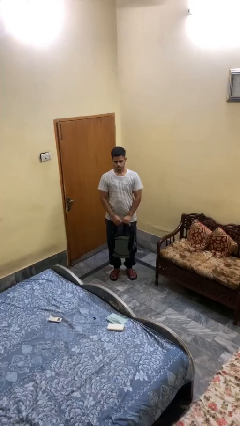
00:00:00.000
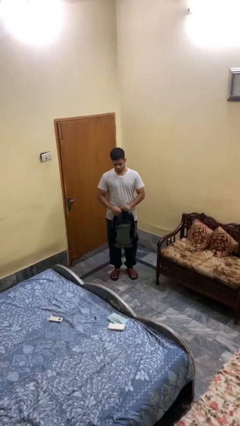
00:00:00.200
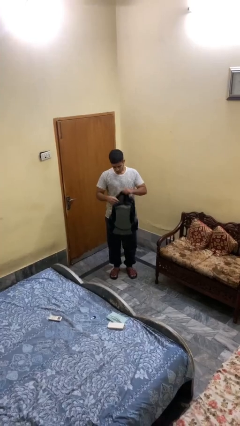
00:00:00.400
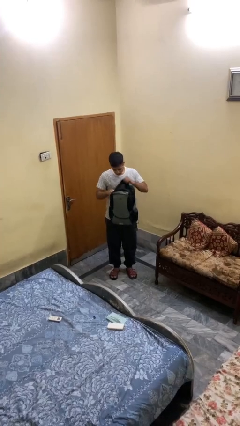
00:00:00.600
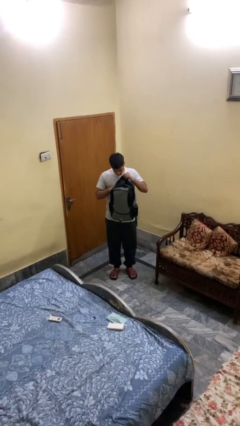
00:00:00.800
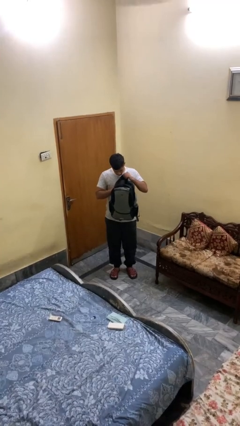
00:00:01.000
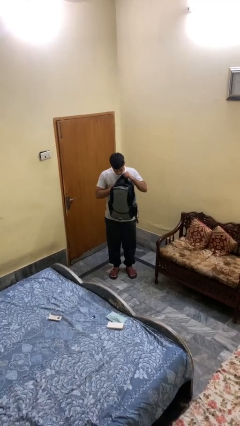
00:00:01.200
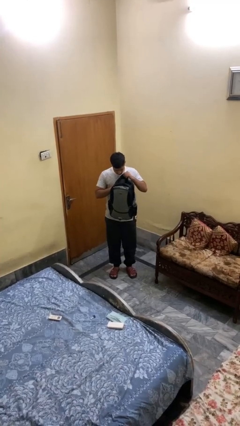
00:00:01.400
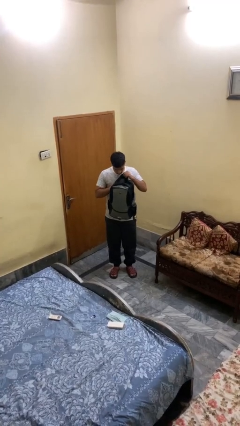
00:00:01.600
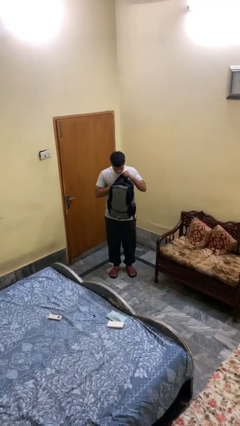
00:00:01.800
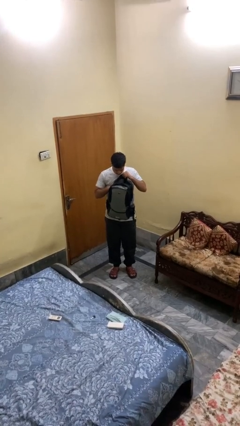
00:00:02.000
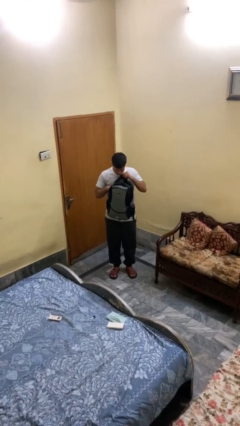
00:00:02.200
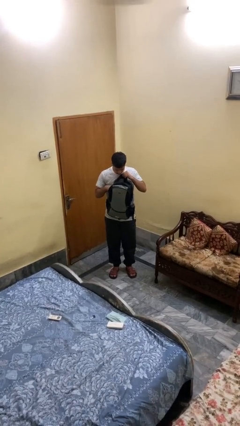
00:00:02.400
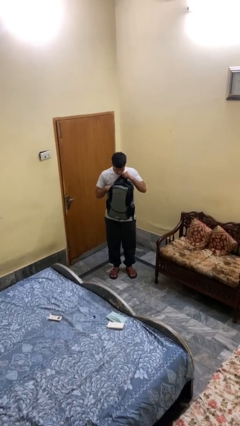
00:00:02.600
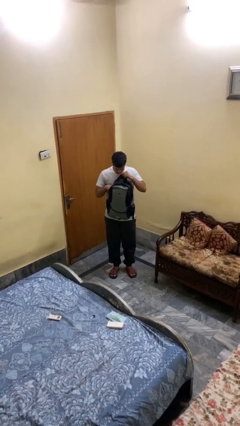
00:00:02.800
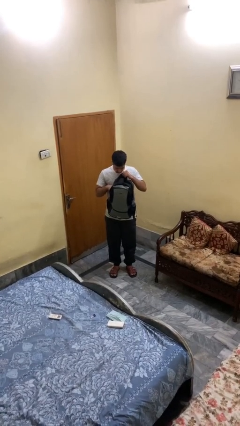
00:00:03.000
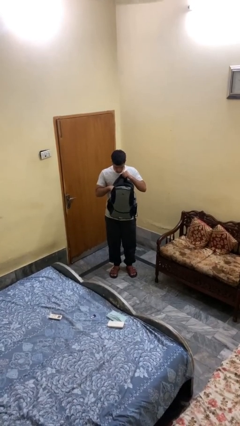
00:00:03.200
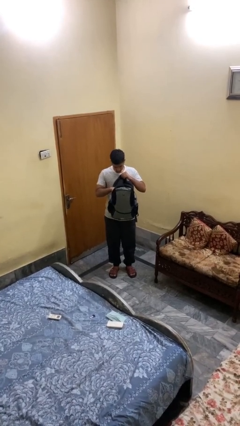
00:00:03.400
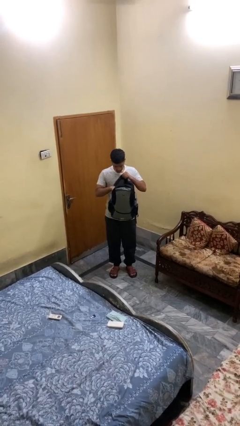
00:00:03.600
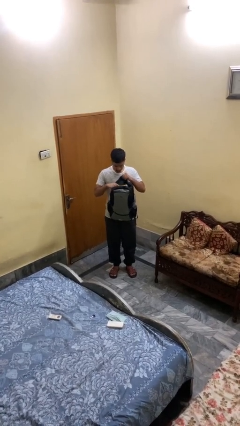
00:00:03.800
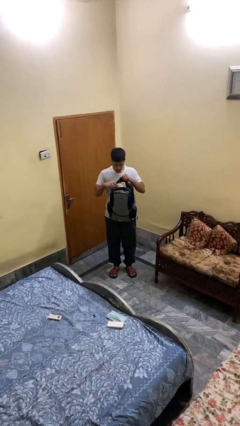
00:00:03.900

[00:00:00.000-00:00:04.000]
person searches in backpack

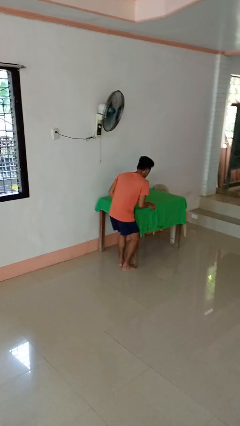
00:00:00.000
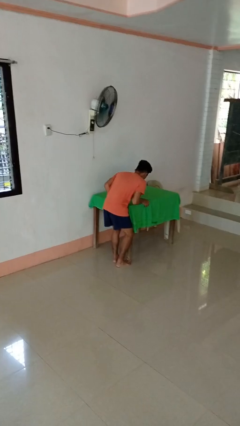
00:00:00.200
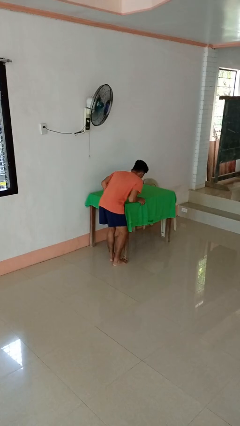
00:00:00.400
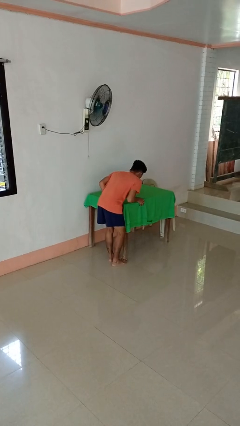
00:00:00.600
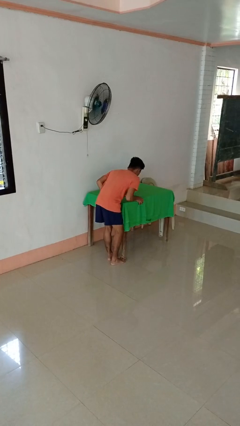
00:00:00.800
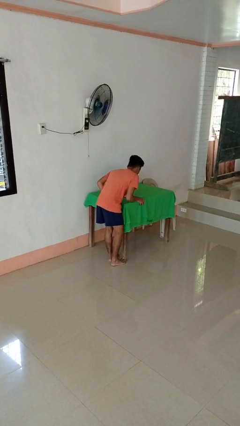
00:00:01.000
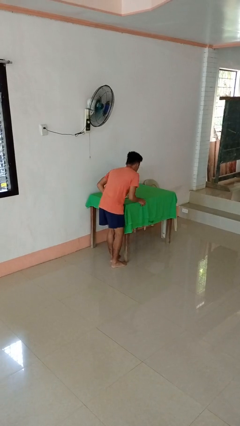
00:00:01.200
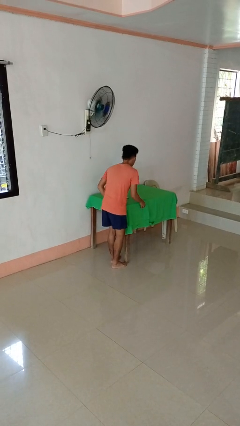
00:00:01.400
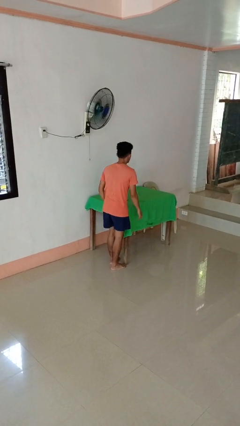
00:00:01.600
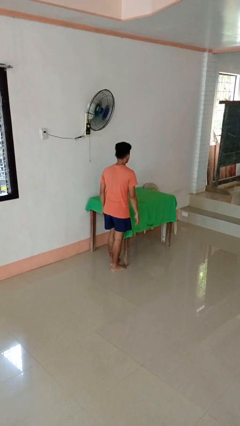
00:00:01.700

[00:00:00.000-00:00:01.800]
person stubs toe

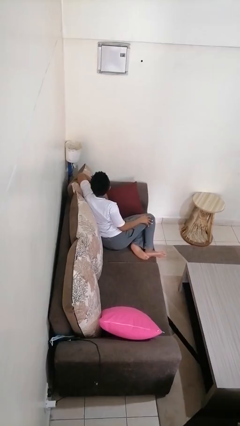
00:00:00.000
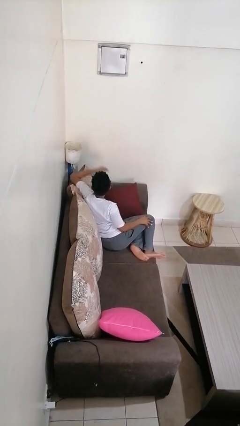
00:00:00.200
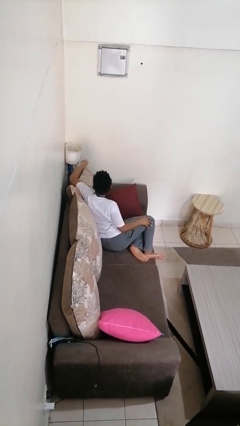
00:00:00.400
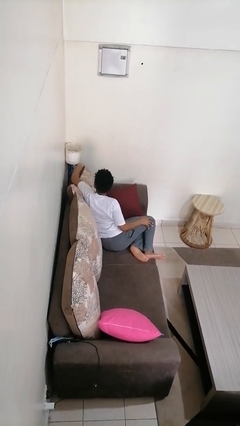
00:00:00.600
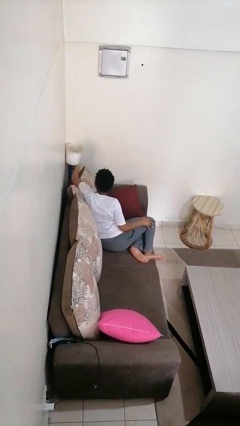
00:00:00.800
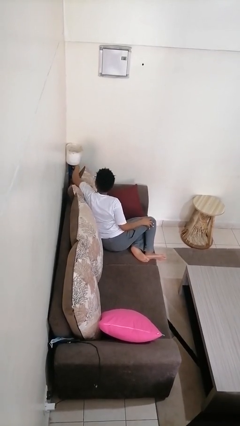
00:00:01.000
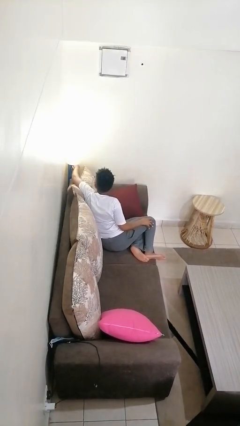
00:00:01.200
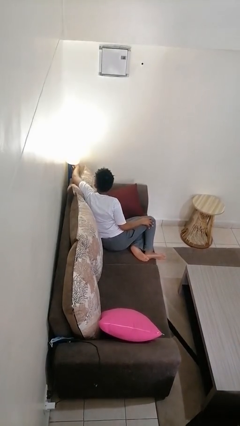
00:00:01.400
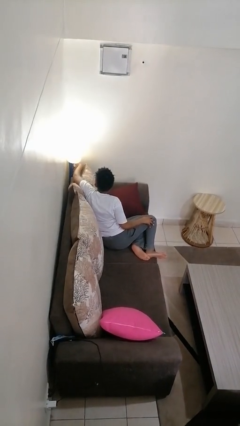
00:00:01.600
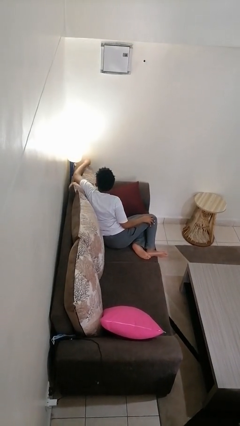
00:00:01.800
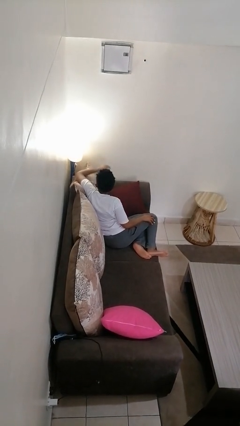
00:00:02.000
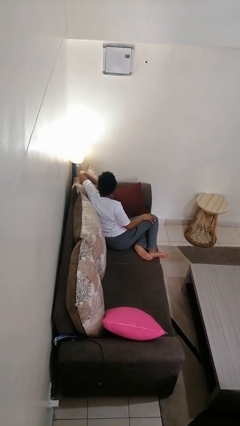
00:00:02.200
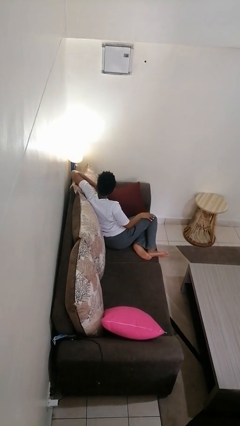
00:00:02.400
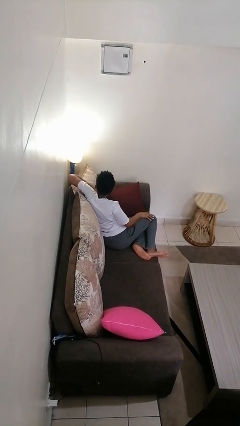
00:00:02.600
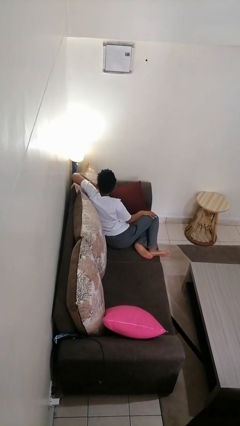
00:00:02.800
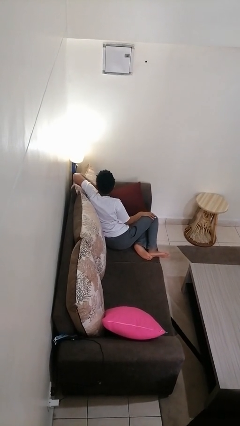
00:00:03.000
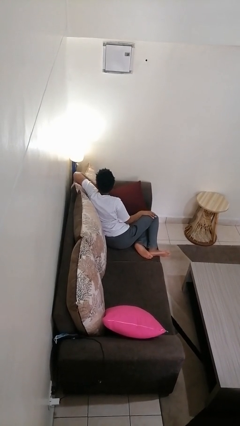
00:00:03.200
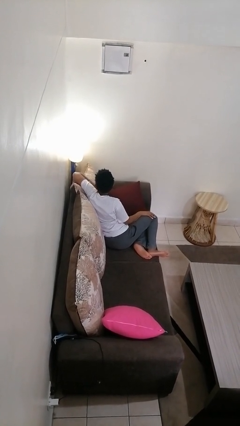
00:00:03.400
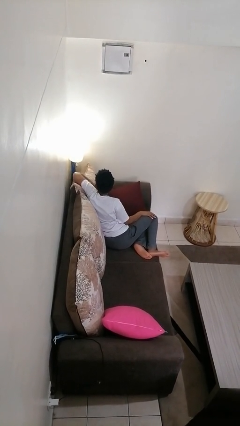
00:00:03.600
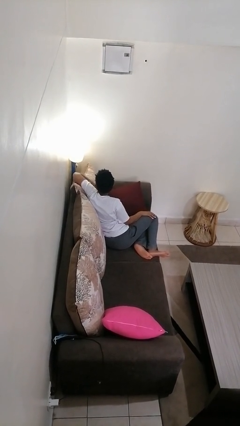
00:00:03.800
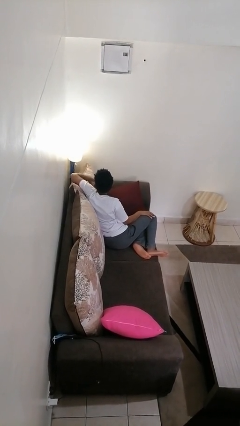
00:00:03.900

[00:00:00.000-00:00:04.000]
person turns on lamp

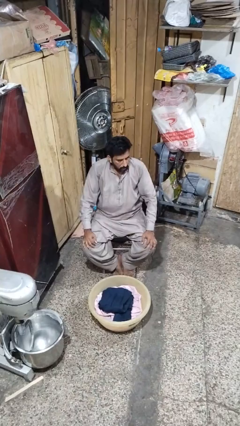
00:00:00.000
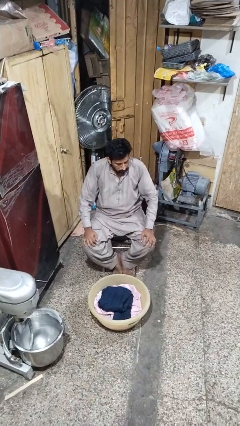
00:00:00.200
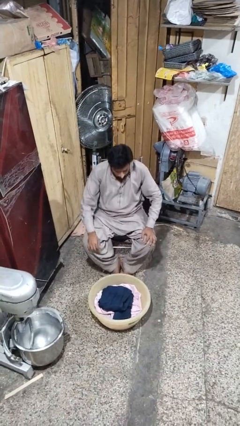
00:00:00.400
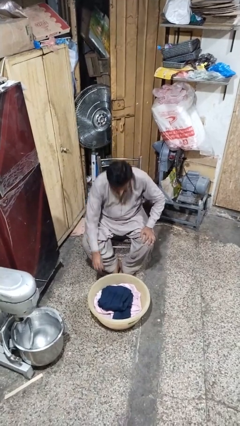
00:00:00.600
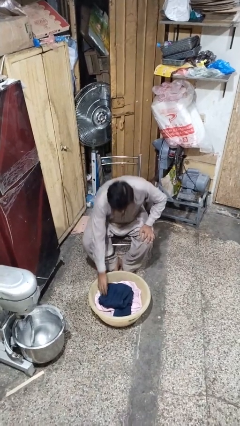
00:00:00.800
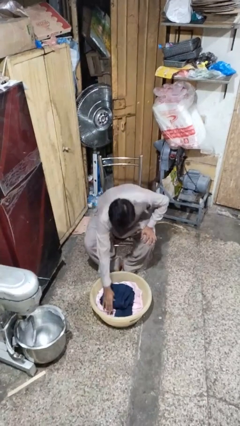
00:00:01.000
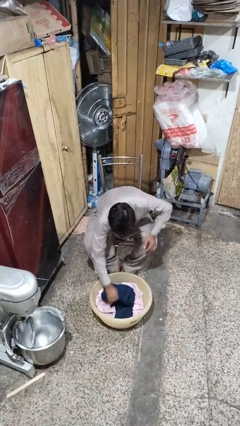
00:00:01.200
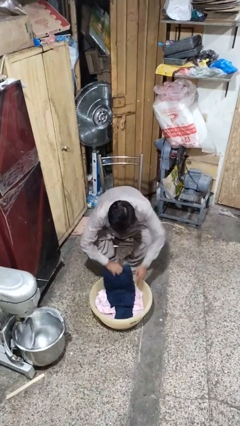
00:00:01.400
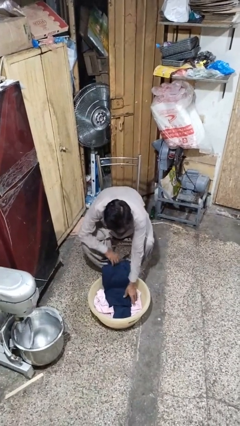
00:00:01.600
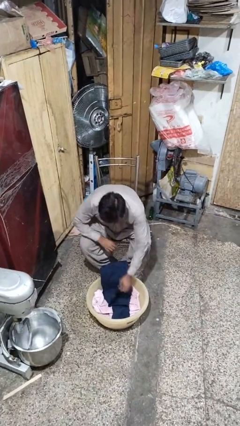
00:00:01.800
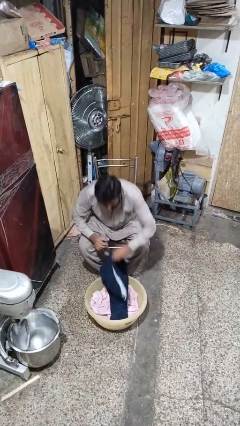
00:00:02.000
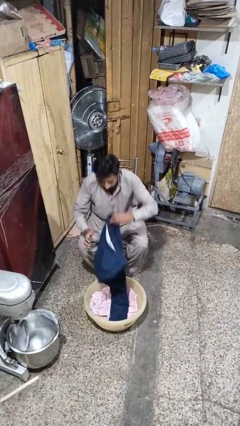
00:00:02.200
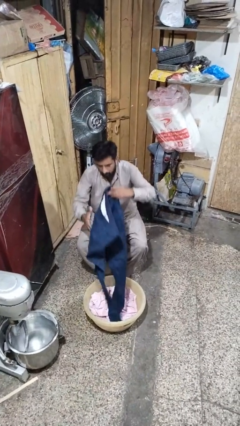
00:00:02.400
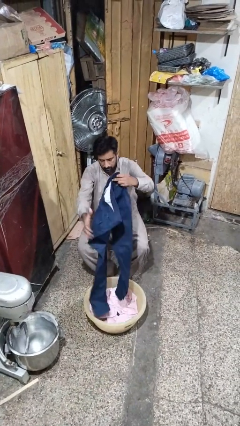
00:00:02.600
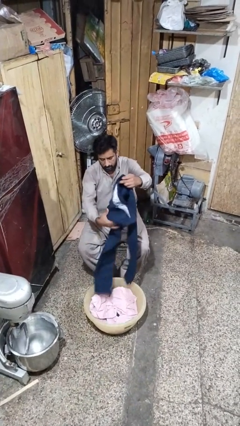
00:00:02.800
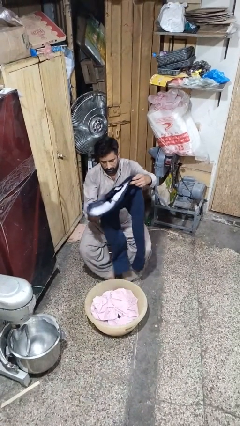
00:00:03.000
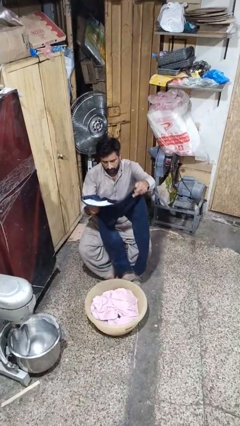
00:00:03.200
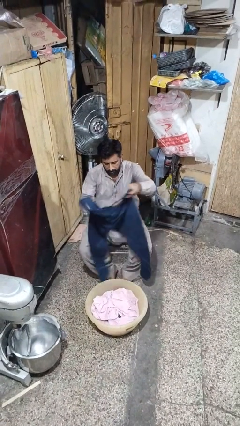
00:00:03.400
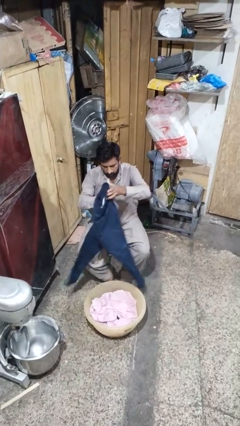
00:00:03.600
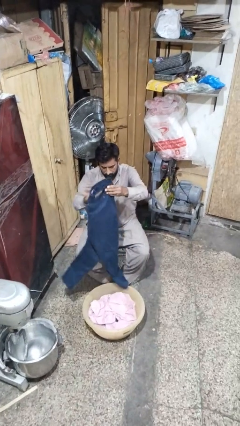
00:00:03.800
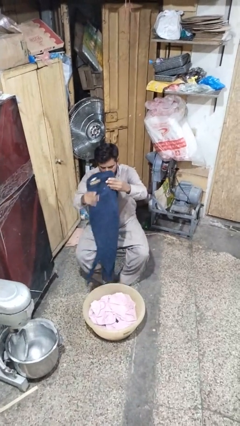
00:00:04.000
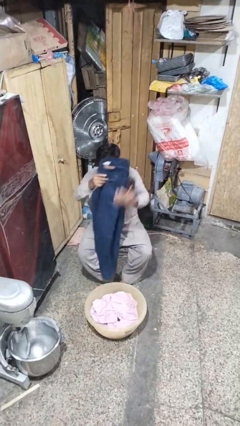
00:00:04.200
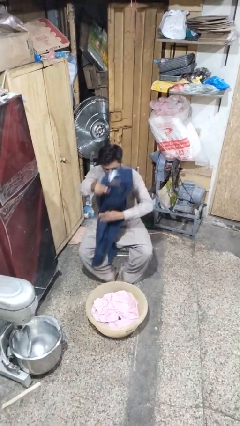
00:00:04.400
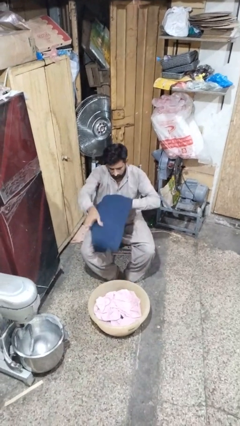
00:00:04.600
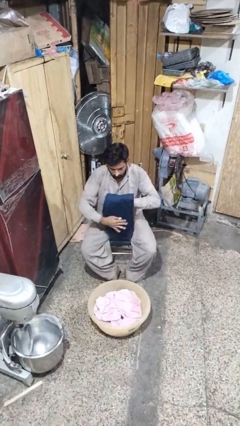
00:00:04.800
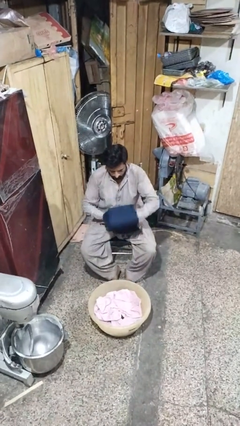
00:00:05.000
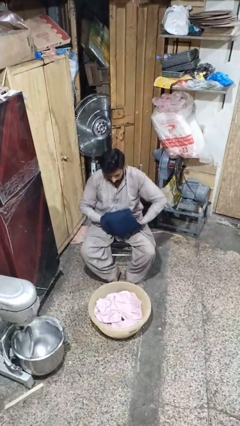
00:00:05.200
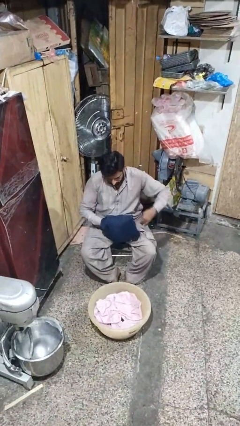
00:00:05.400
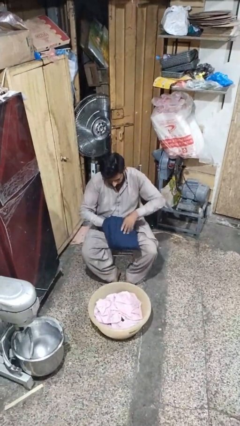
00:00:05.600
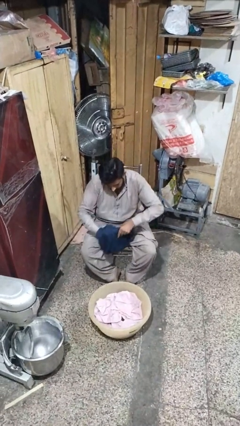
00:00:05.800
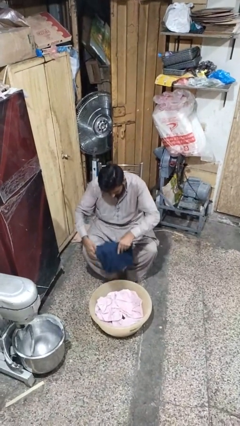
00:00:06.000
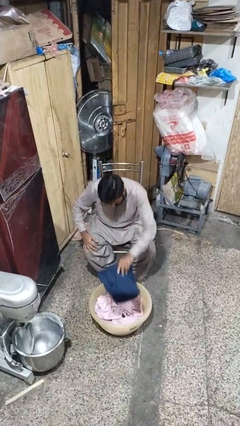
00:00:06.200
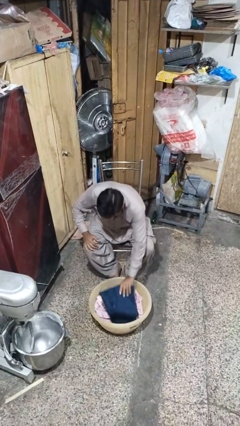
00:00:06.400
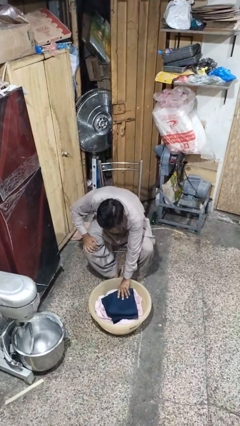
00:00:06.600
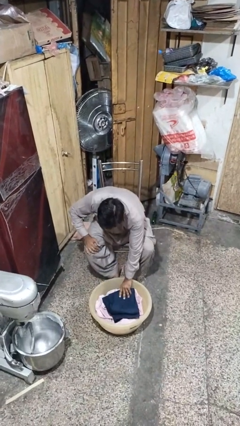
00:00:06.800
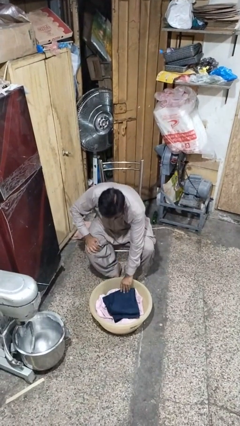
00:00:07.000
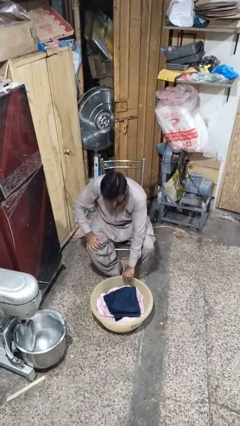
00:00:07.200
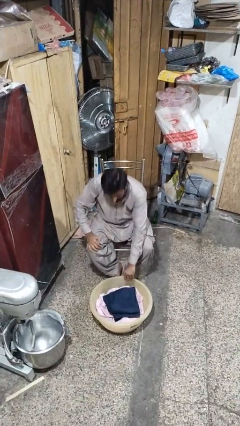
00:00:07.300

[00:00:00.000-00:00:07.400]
person folds pants

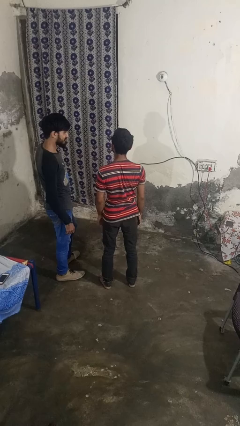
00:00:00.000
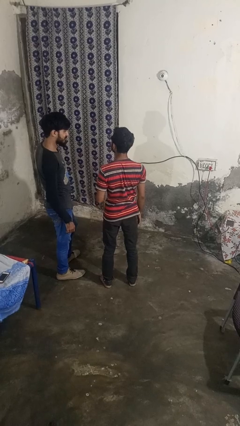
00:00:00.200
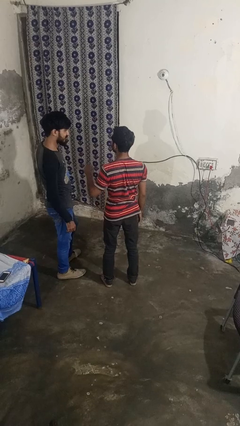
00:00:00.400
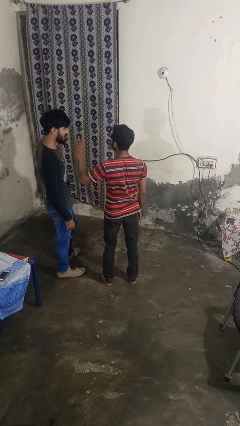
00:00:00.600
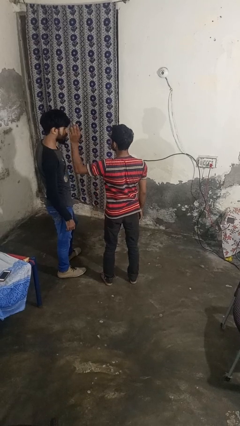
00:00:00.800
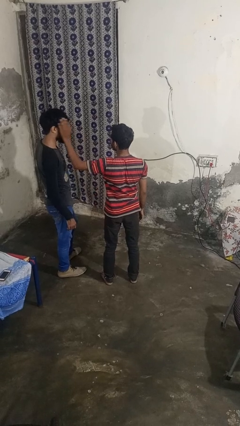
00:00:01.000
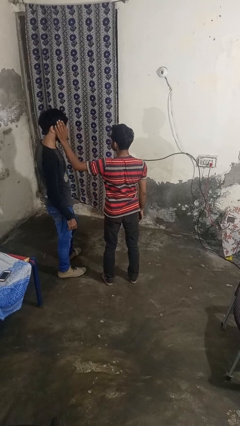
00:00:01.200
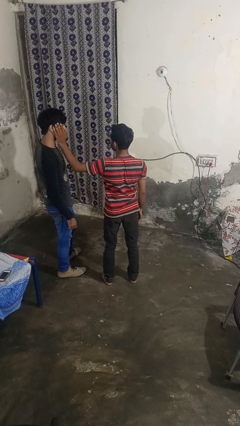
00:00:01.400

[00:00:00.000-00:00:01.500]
person touches face of person
